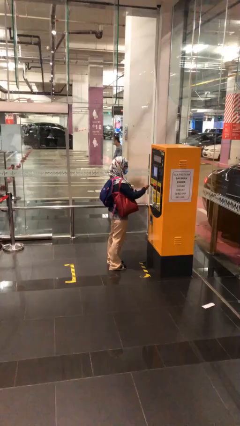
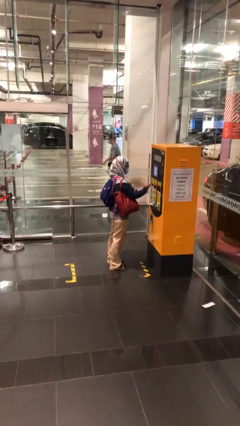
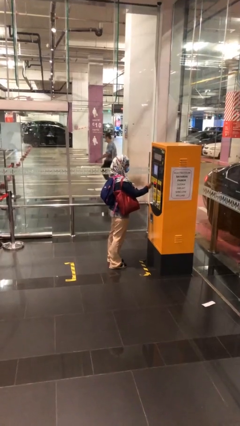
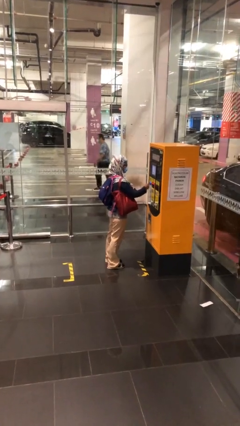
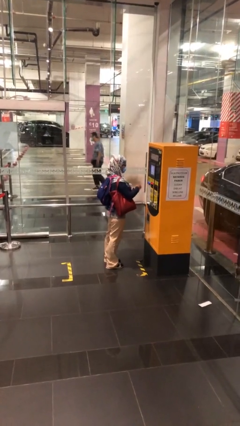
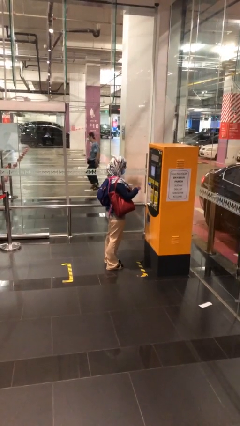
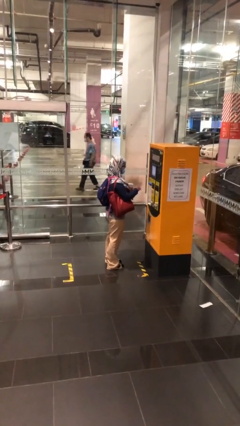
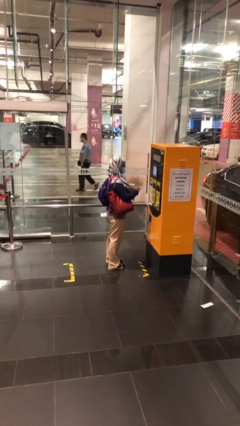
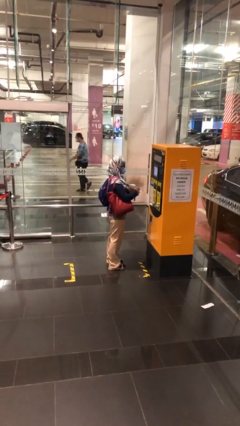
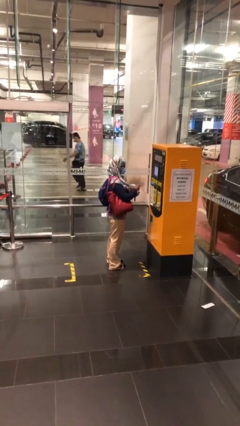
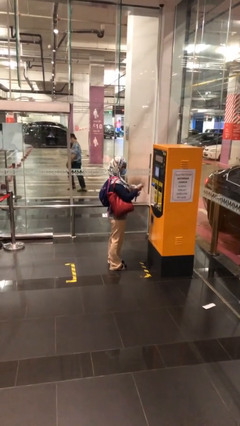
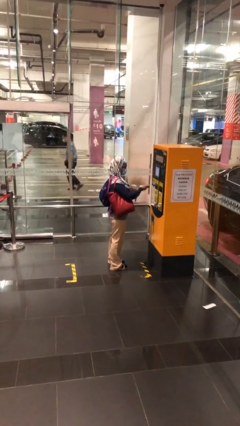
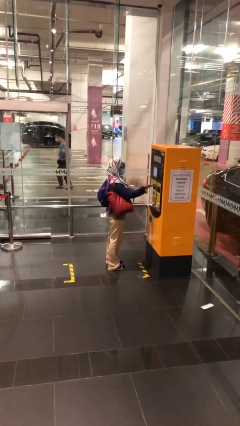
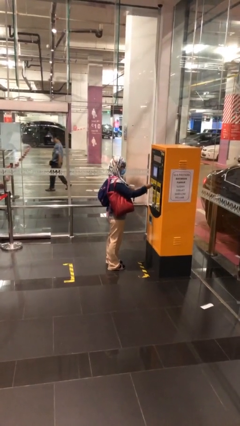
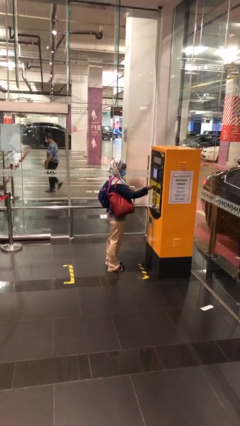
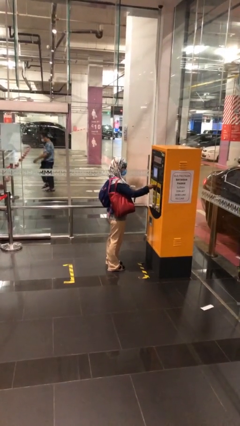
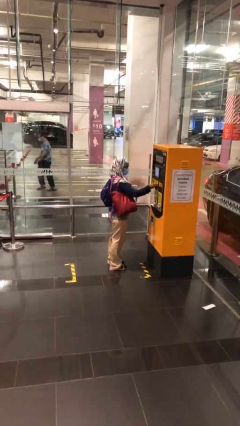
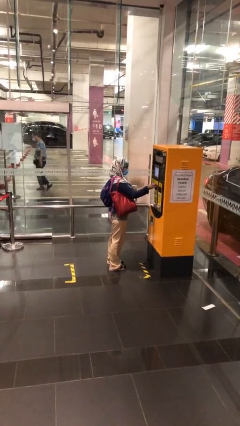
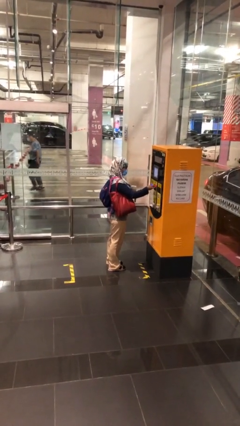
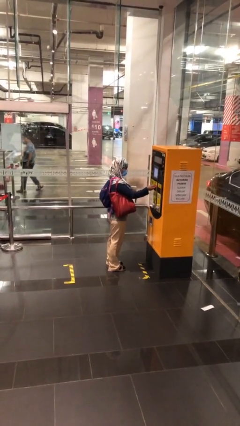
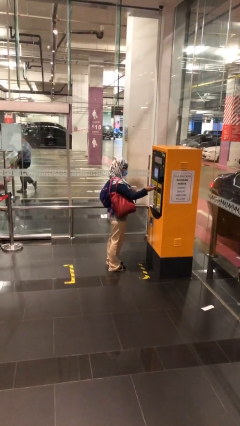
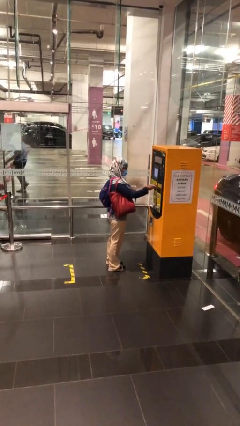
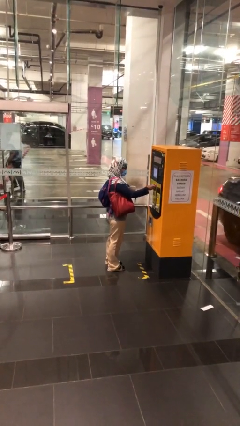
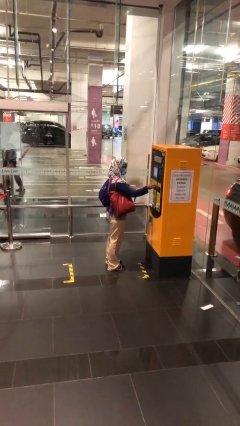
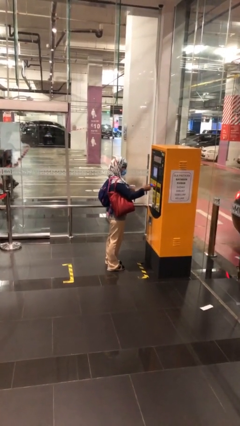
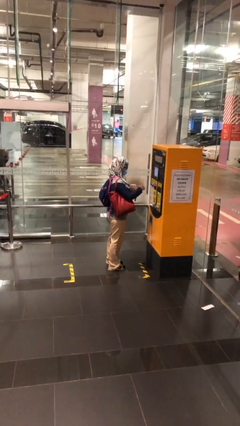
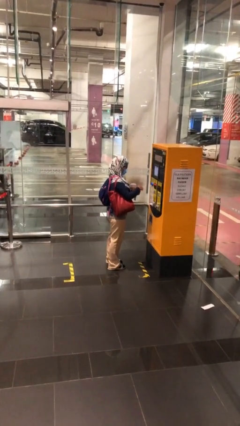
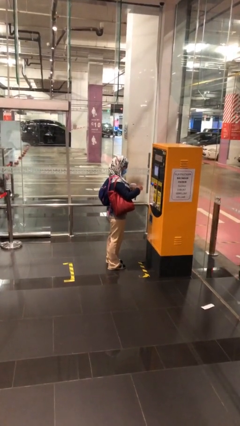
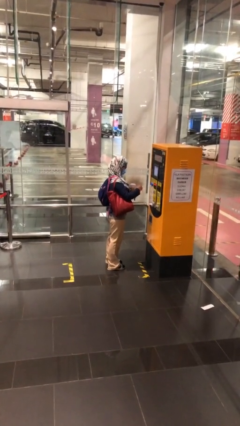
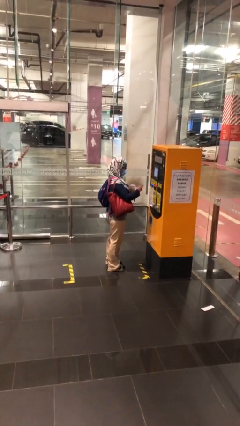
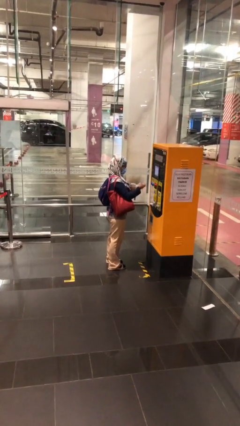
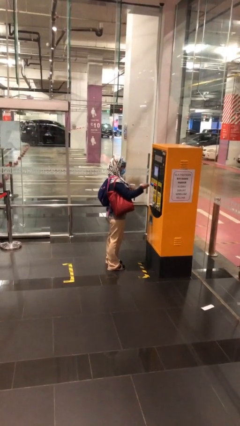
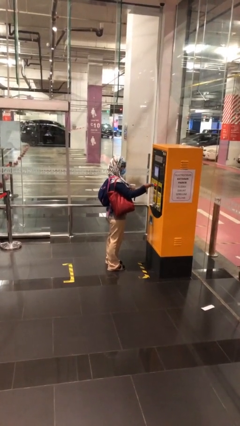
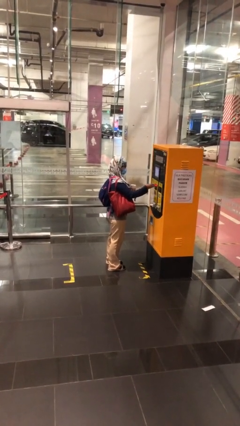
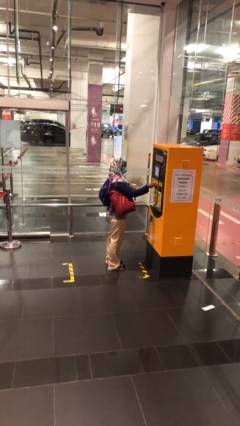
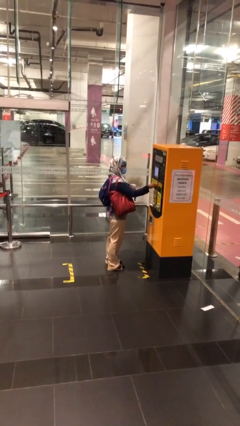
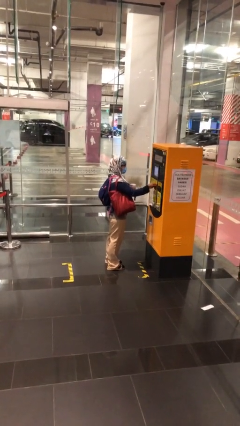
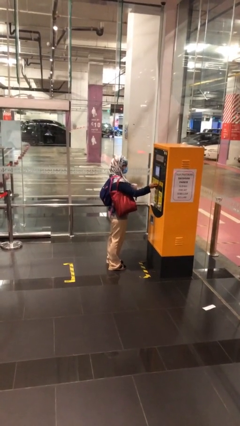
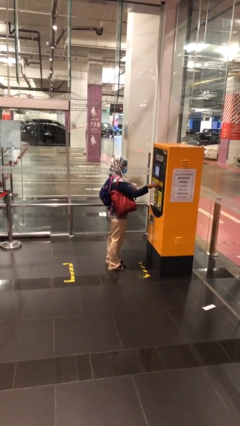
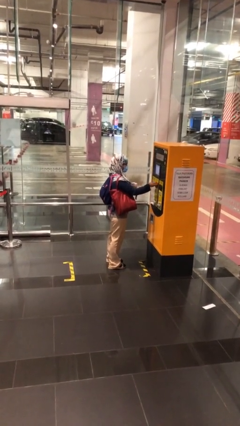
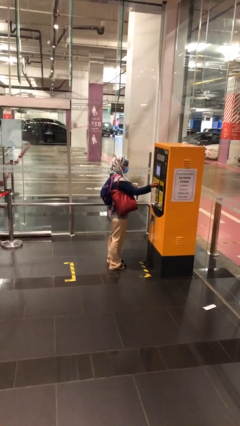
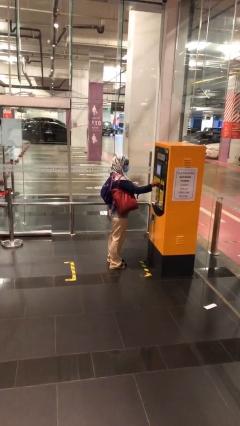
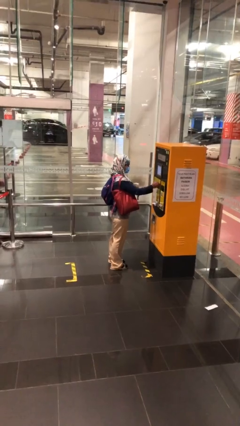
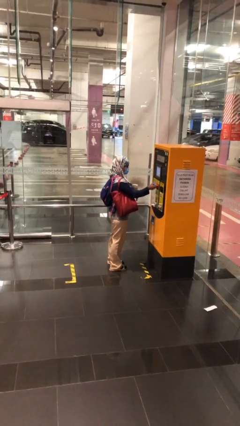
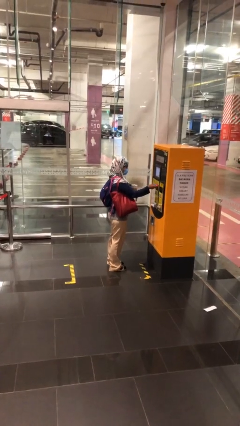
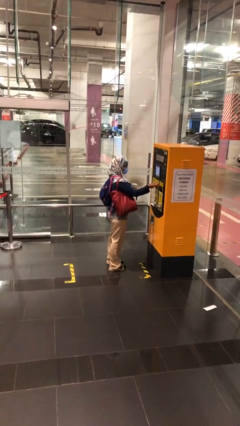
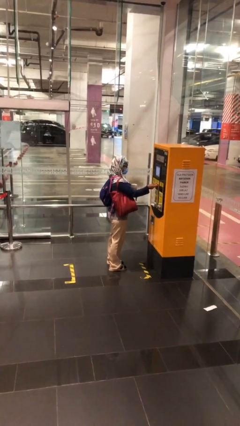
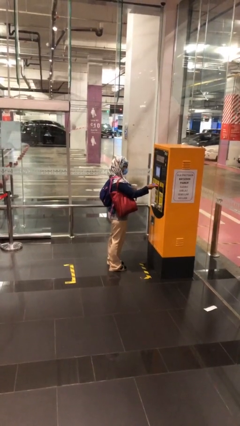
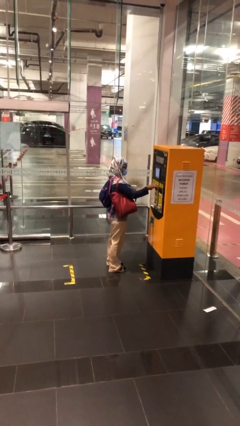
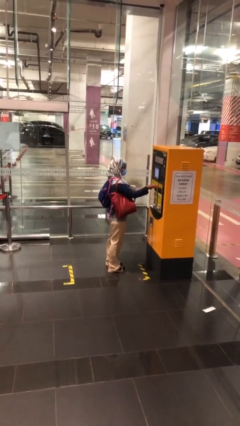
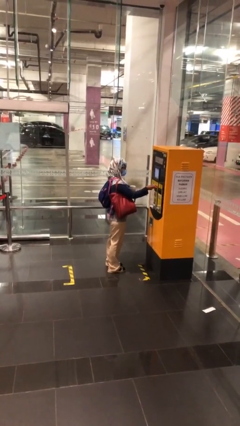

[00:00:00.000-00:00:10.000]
person purchases from machine

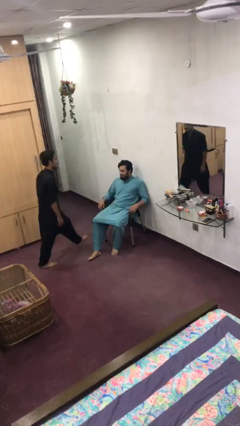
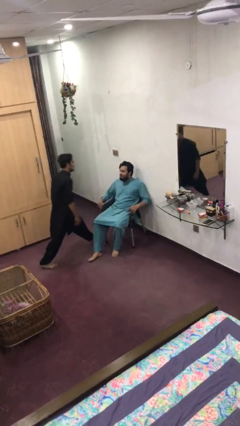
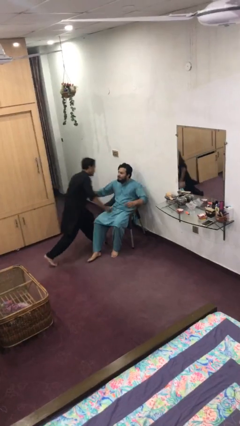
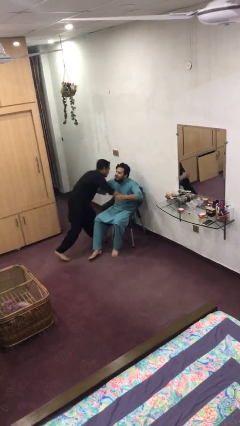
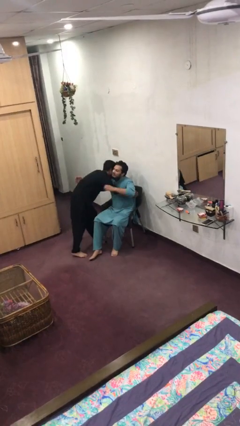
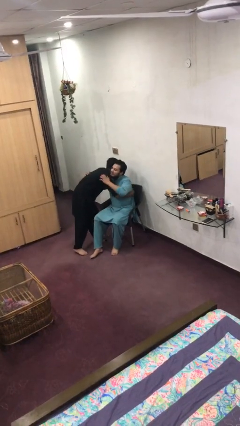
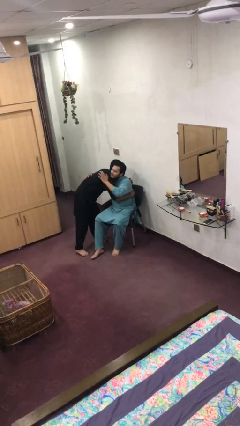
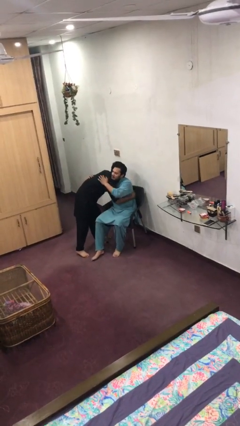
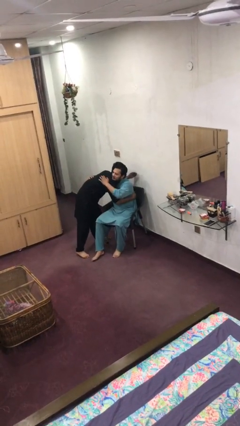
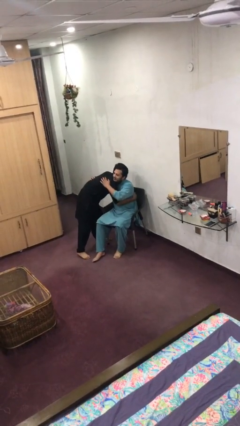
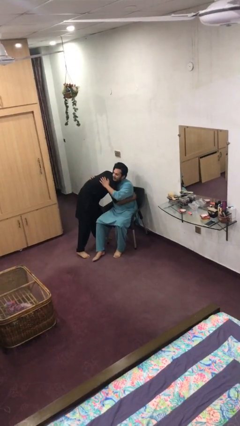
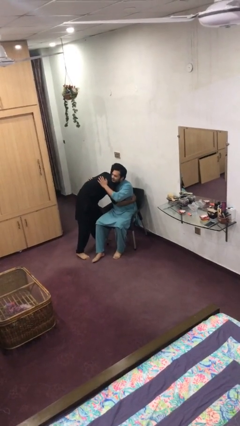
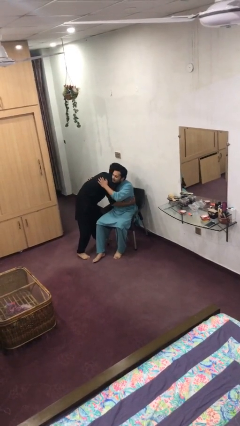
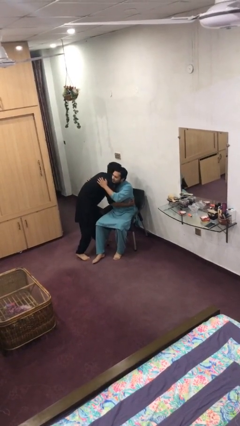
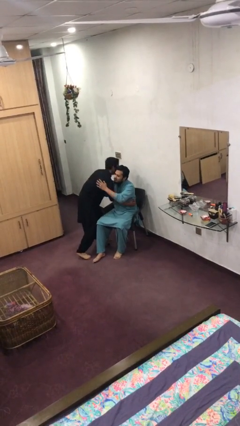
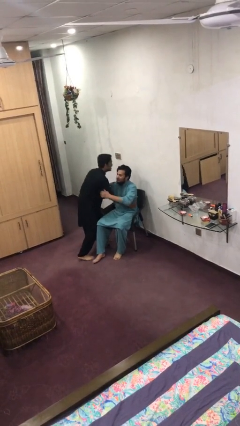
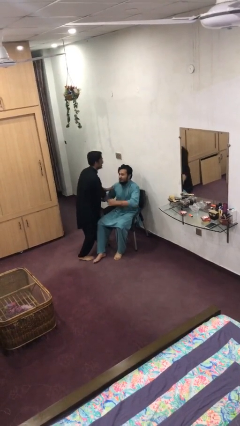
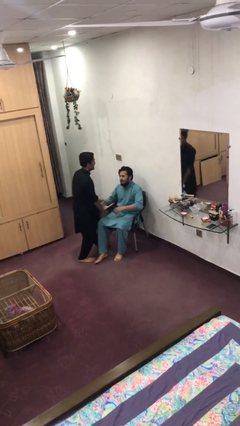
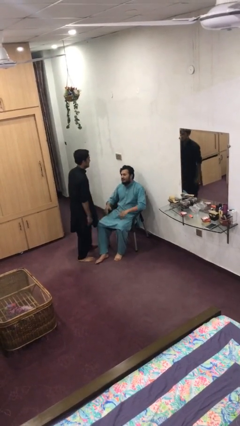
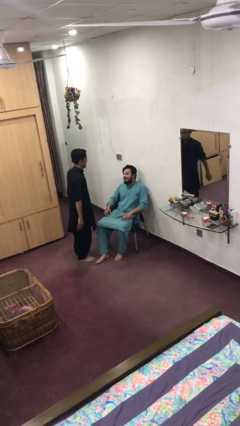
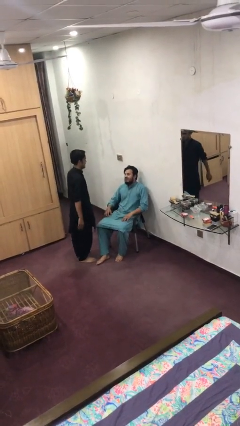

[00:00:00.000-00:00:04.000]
person embraces person

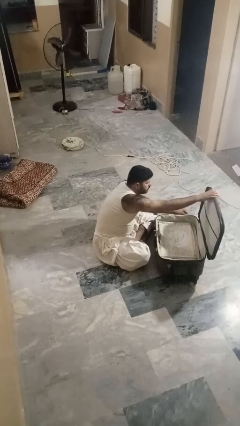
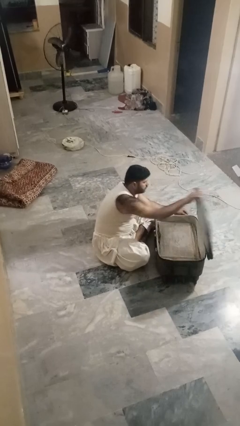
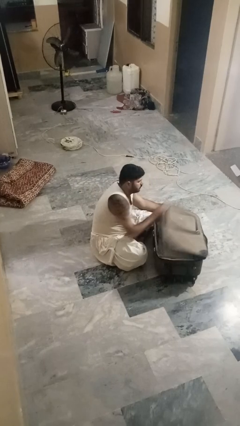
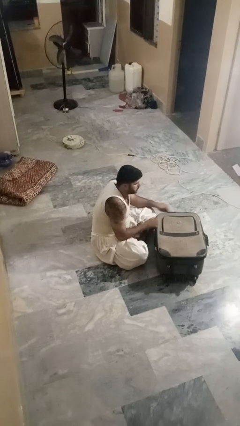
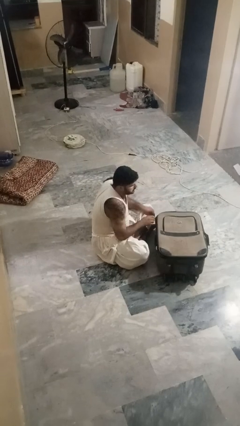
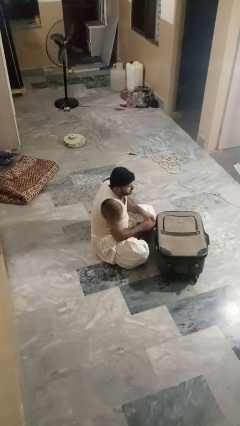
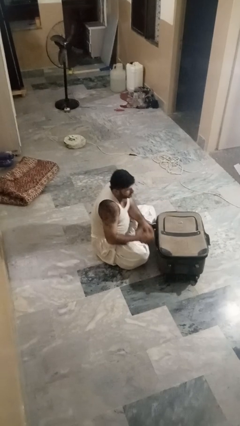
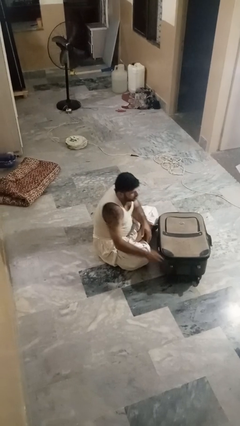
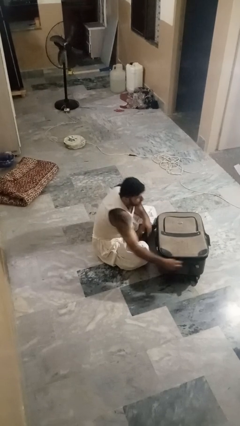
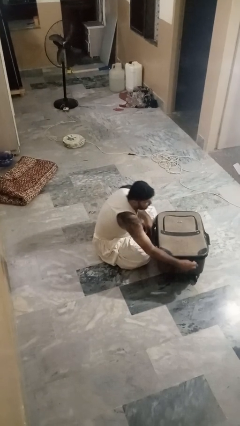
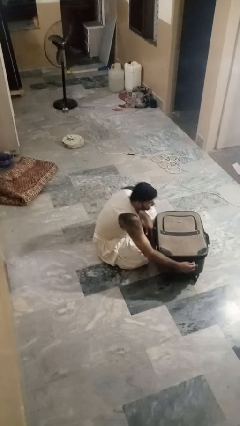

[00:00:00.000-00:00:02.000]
person closes suitcase

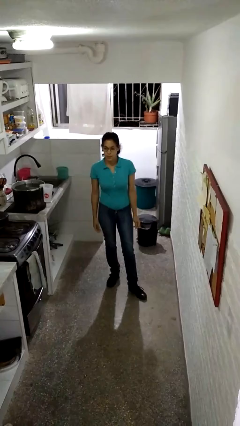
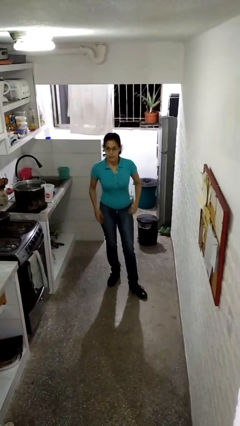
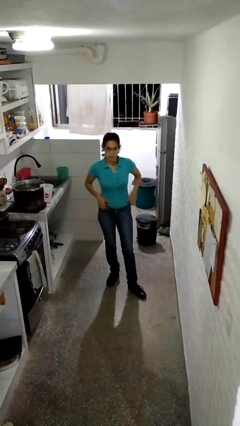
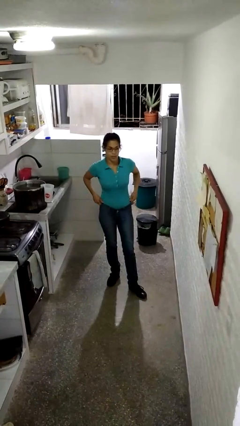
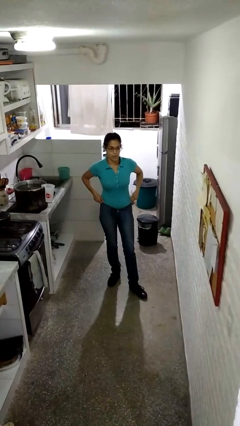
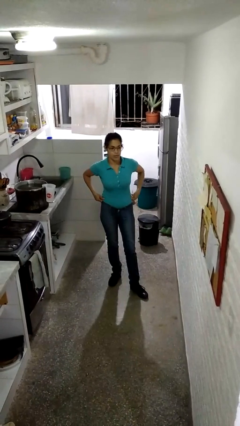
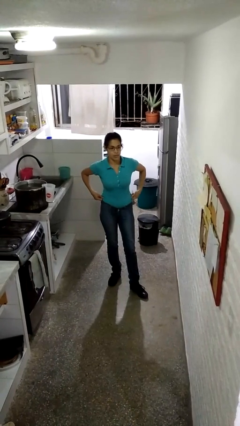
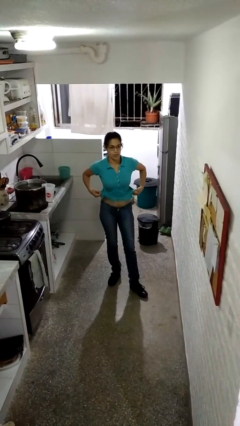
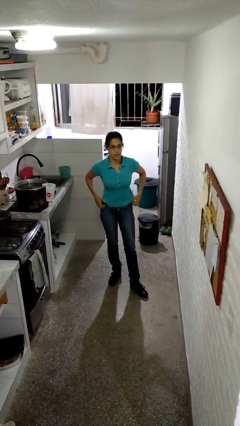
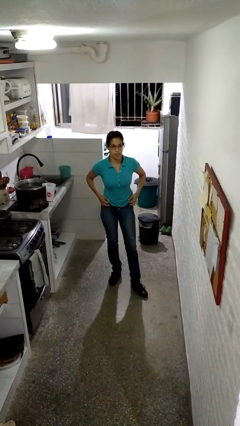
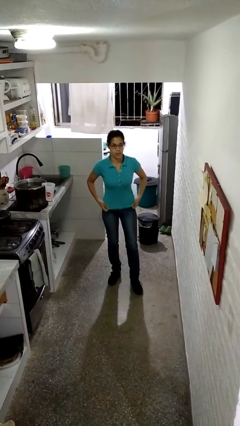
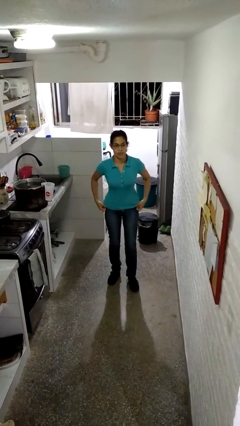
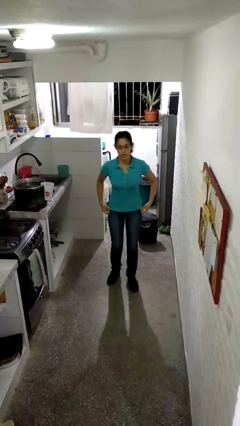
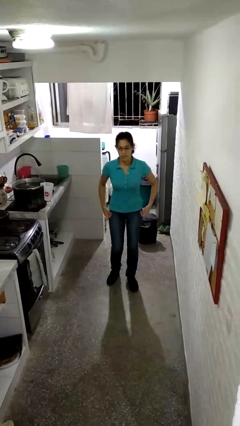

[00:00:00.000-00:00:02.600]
person untucks shirt
